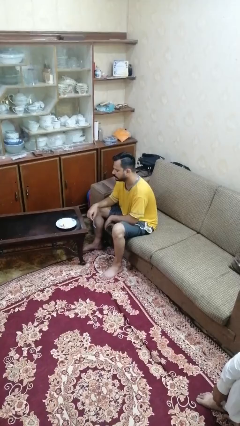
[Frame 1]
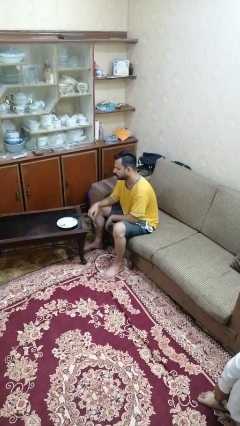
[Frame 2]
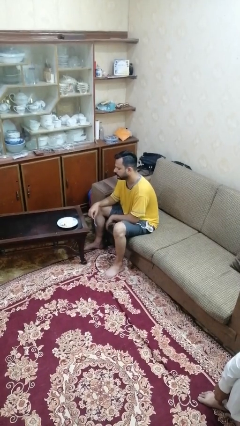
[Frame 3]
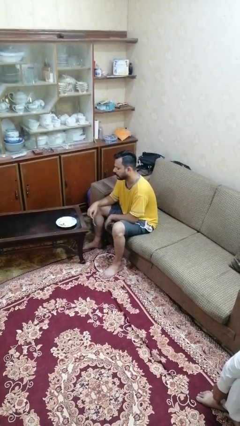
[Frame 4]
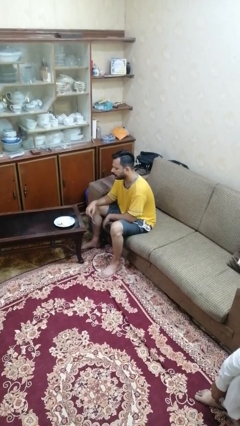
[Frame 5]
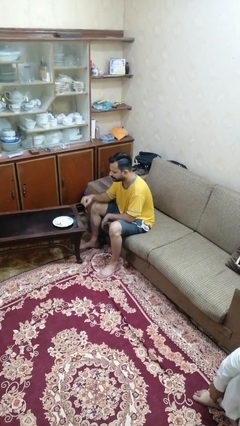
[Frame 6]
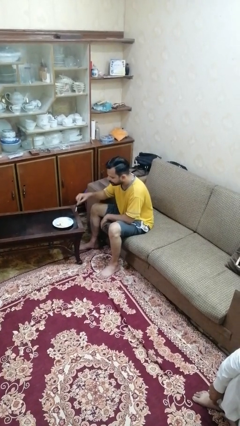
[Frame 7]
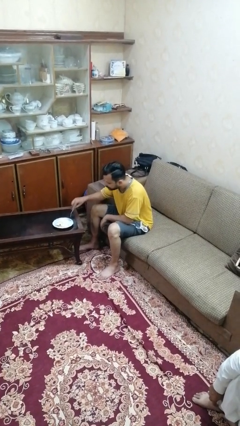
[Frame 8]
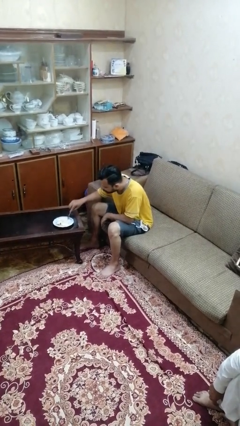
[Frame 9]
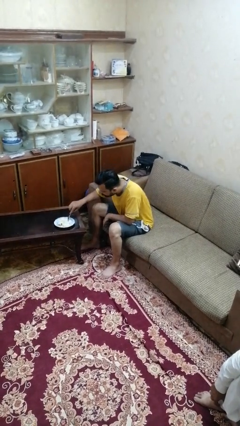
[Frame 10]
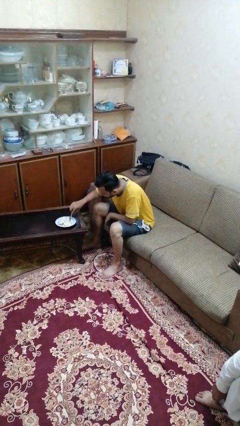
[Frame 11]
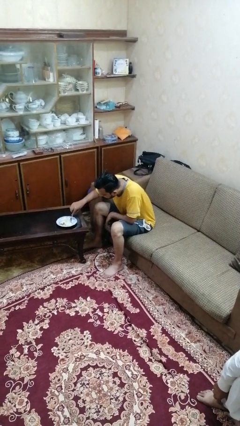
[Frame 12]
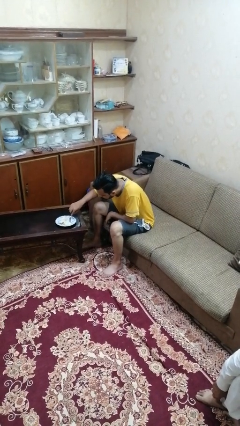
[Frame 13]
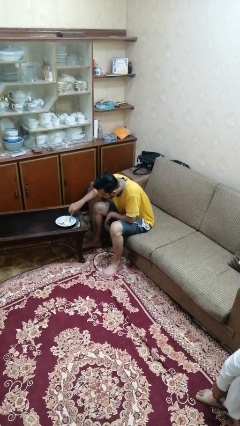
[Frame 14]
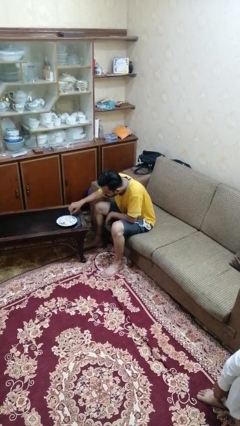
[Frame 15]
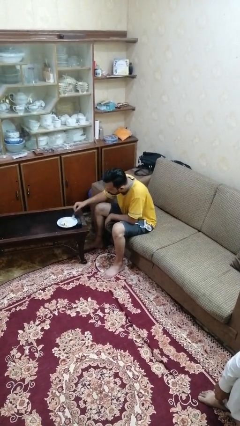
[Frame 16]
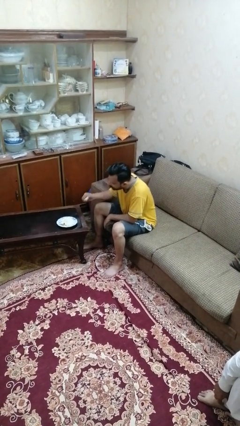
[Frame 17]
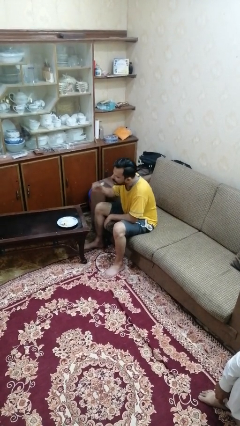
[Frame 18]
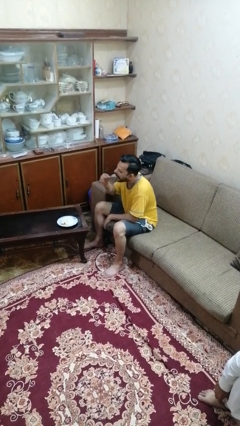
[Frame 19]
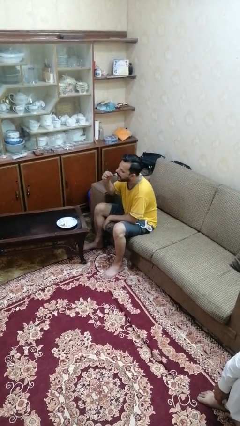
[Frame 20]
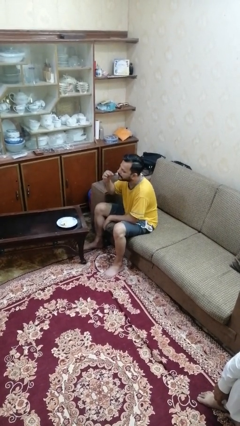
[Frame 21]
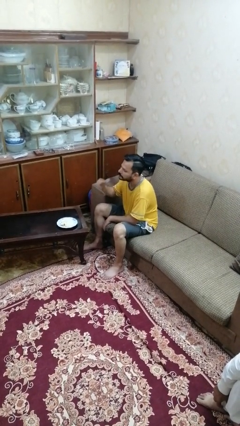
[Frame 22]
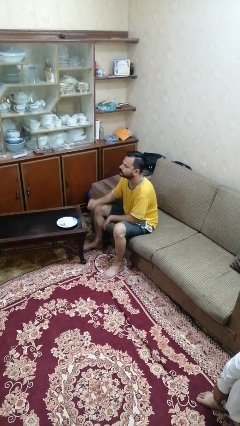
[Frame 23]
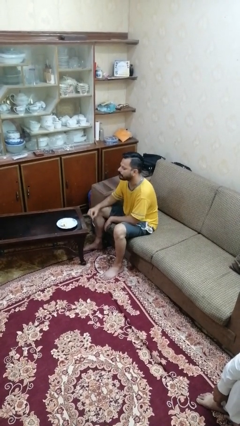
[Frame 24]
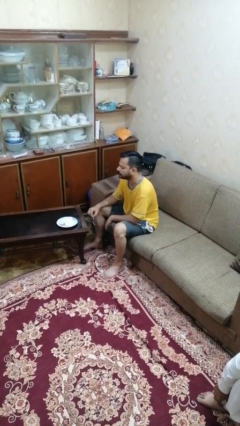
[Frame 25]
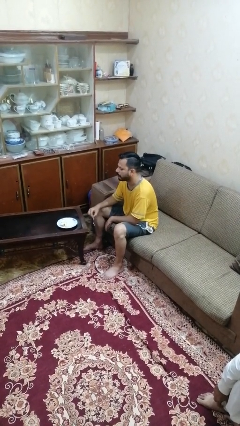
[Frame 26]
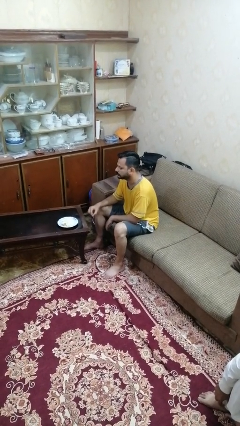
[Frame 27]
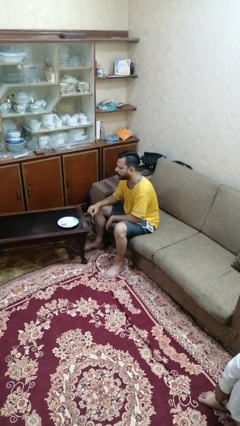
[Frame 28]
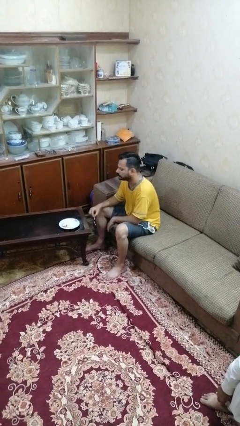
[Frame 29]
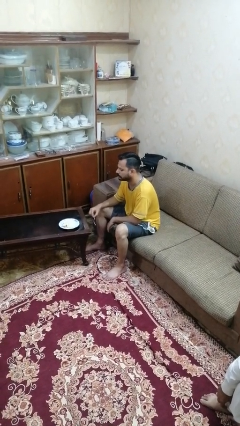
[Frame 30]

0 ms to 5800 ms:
person eats with utensil

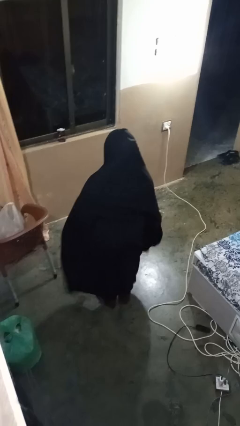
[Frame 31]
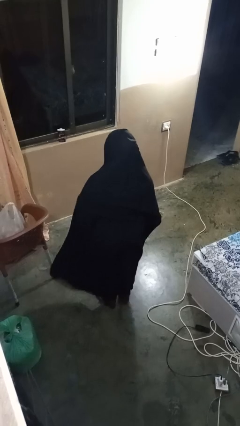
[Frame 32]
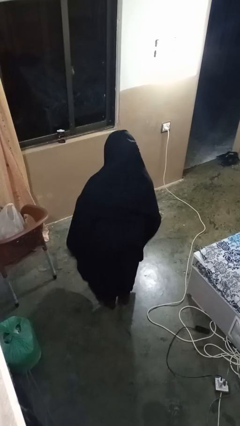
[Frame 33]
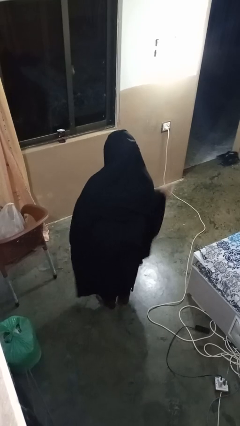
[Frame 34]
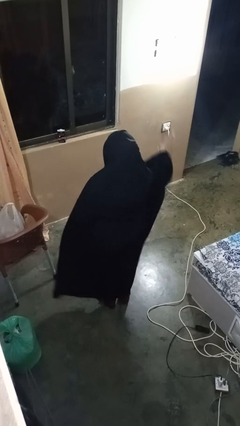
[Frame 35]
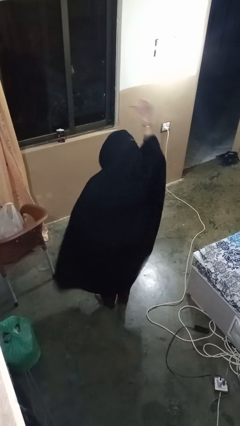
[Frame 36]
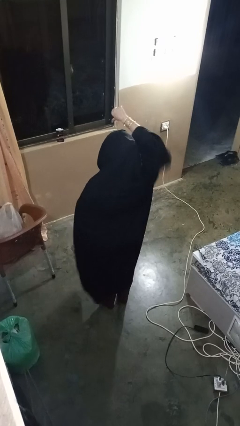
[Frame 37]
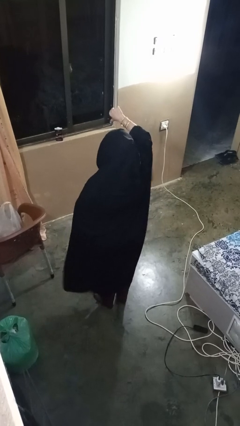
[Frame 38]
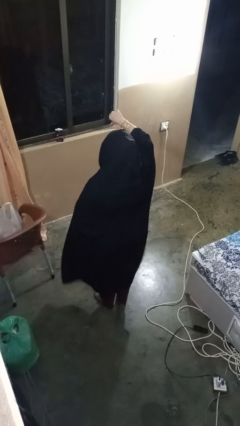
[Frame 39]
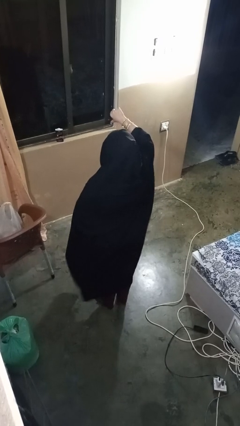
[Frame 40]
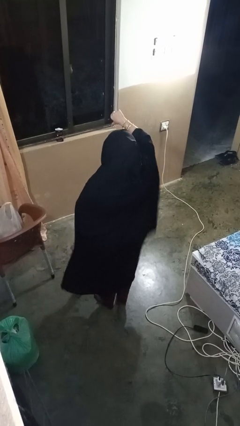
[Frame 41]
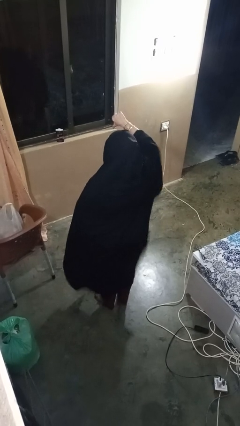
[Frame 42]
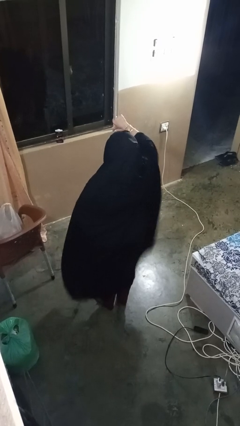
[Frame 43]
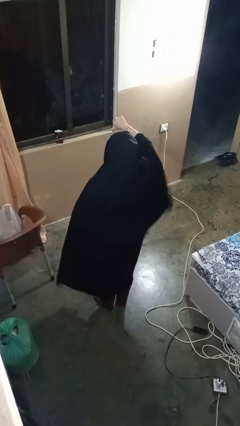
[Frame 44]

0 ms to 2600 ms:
person gestures thumbs down

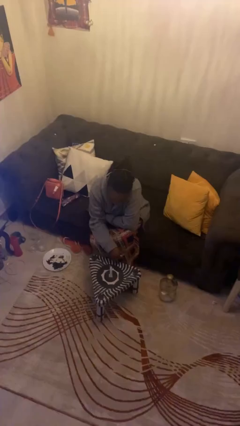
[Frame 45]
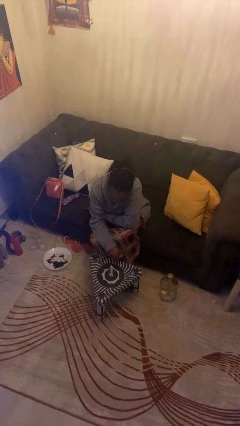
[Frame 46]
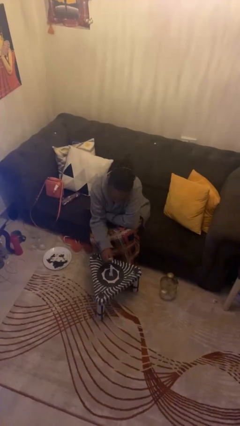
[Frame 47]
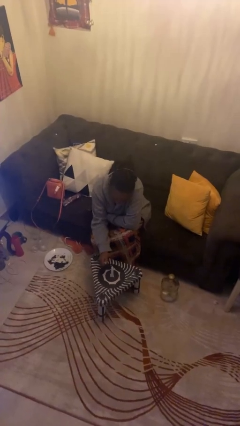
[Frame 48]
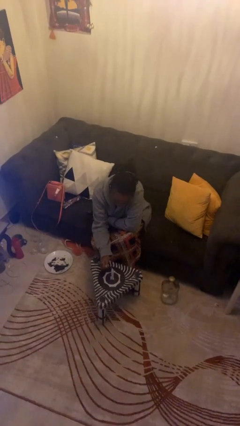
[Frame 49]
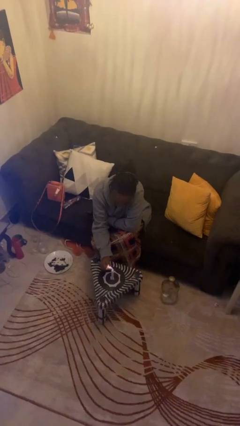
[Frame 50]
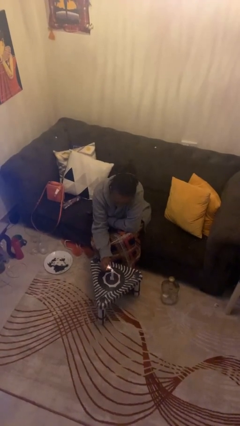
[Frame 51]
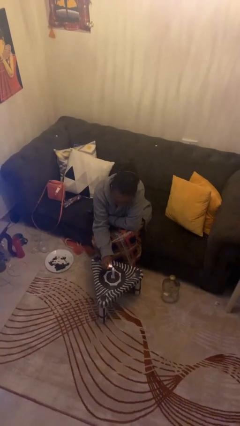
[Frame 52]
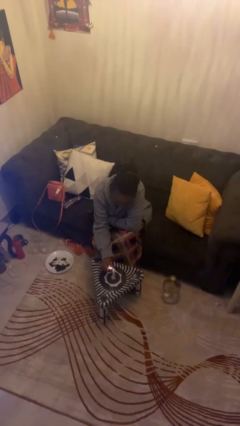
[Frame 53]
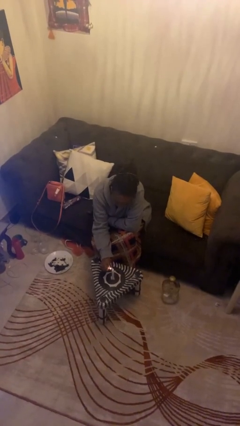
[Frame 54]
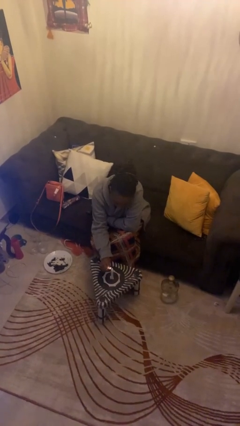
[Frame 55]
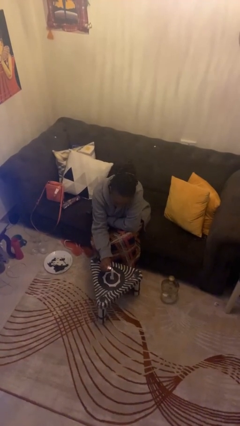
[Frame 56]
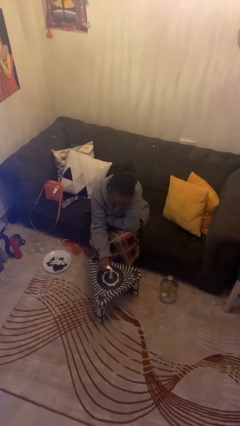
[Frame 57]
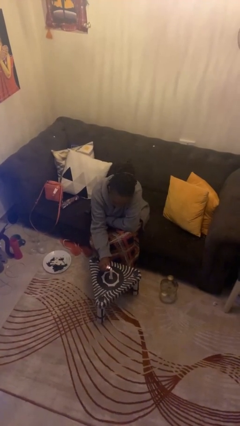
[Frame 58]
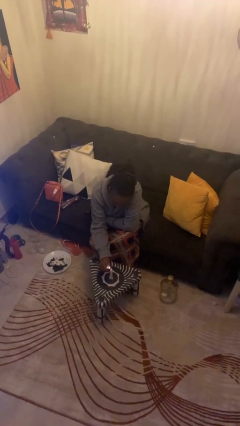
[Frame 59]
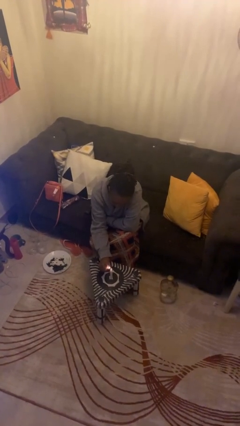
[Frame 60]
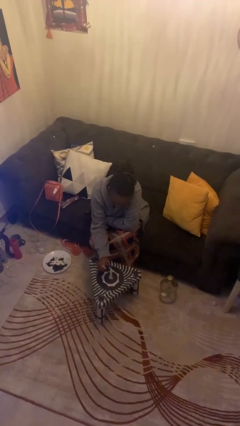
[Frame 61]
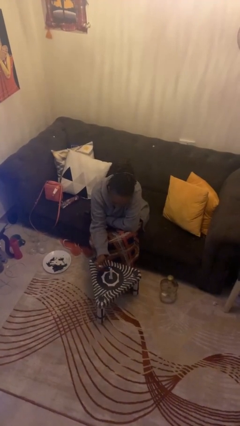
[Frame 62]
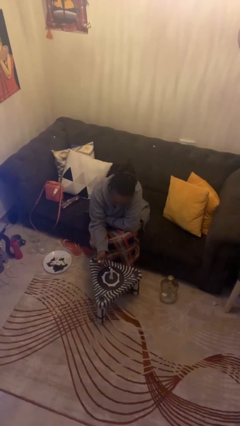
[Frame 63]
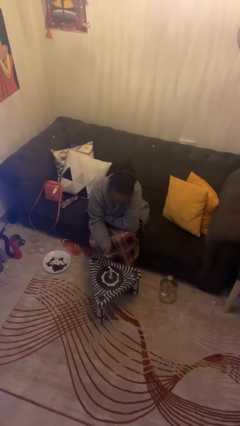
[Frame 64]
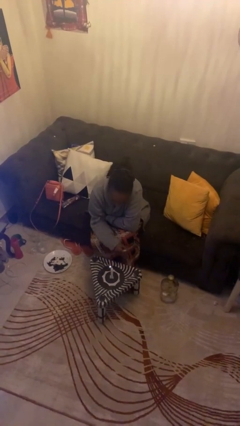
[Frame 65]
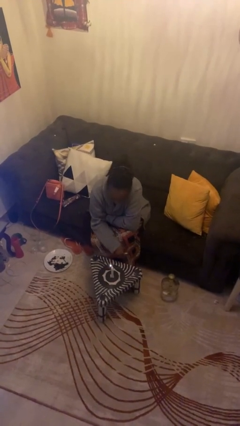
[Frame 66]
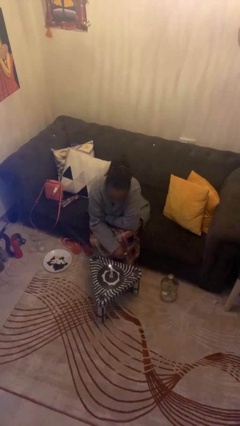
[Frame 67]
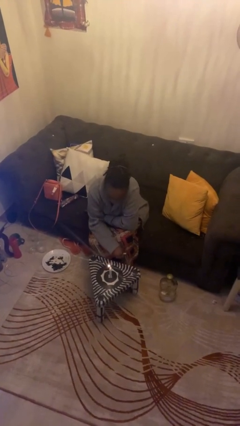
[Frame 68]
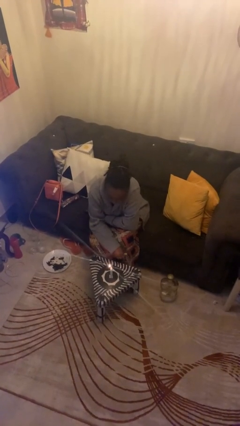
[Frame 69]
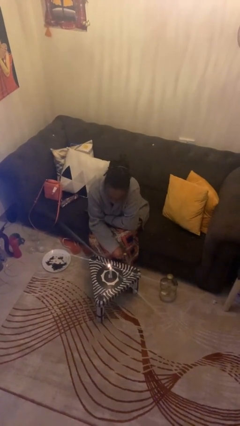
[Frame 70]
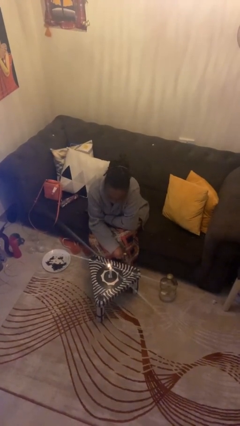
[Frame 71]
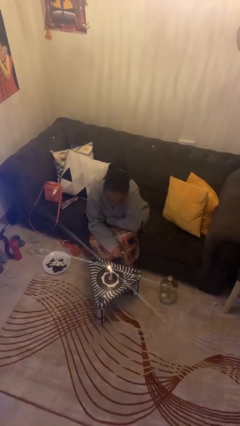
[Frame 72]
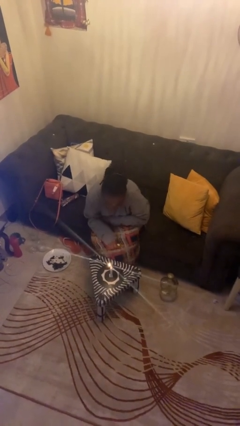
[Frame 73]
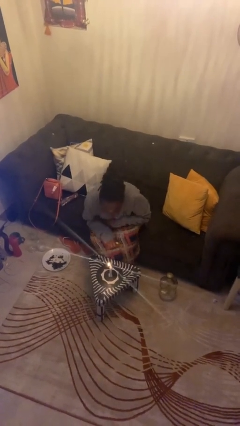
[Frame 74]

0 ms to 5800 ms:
person lights candle

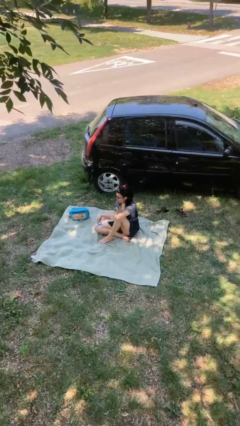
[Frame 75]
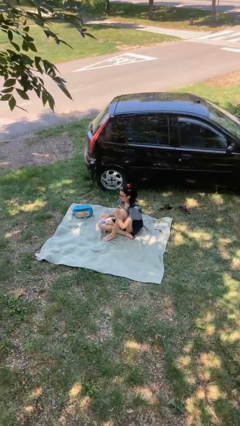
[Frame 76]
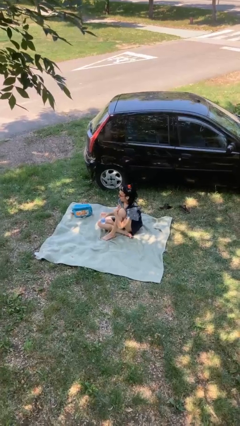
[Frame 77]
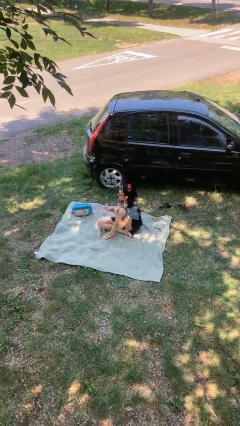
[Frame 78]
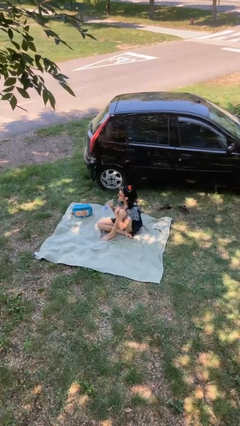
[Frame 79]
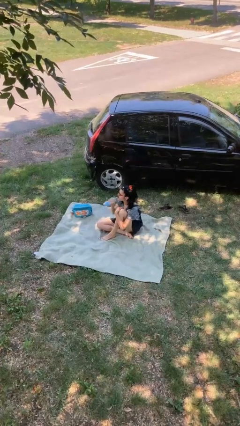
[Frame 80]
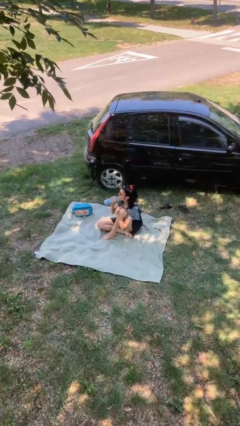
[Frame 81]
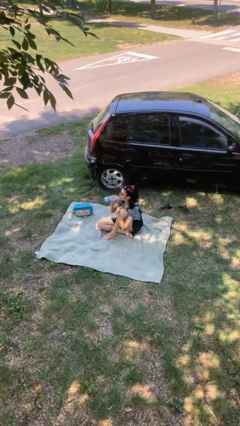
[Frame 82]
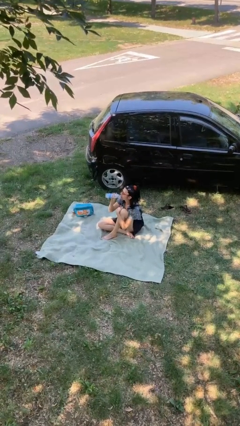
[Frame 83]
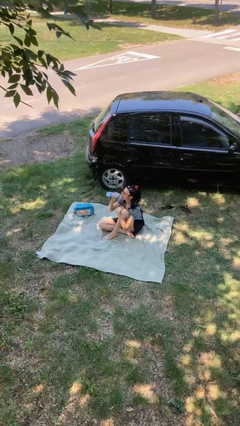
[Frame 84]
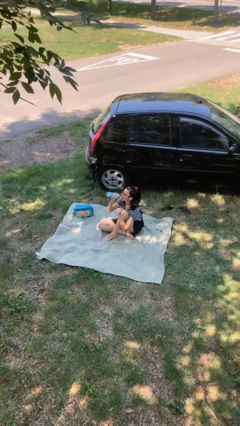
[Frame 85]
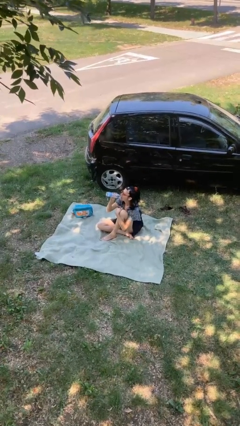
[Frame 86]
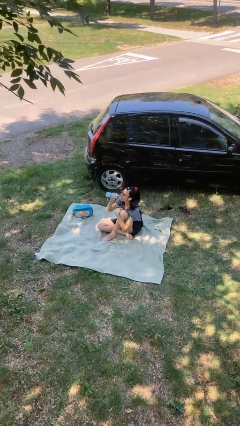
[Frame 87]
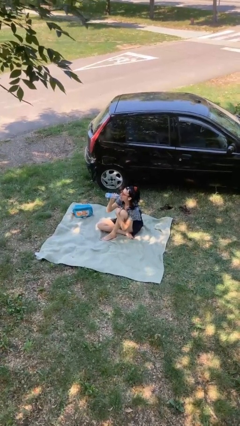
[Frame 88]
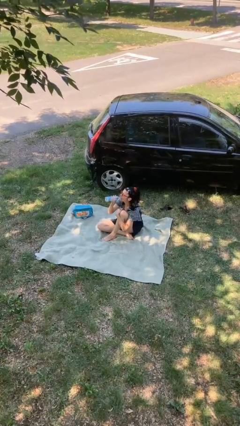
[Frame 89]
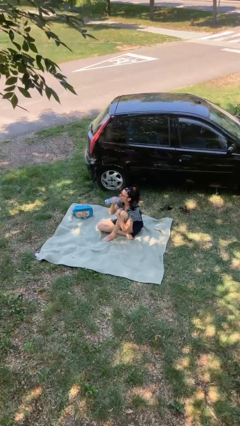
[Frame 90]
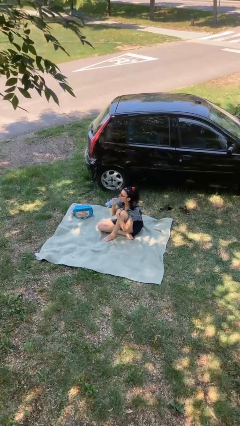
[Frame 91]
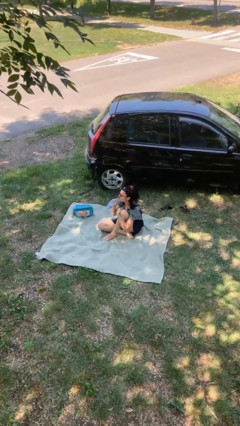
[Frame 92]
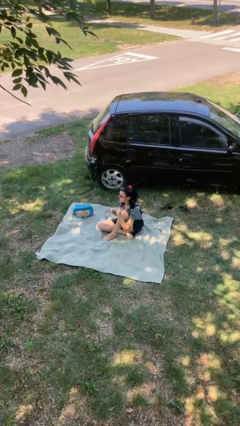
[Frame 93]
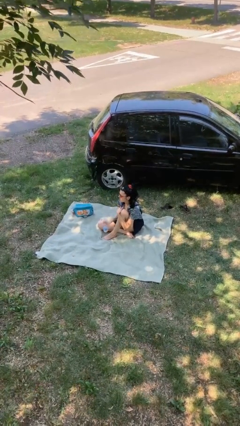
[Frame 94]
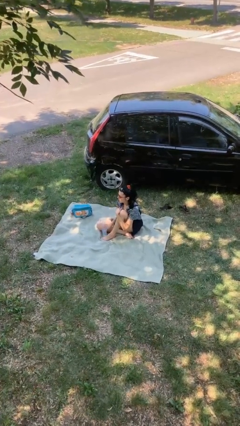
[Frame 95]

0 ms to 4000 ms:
person drinks from bottle
